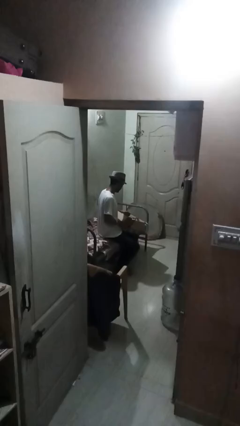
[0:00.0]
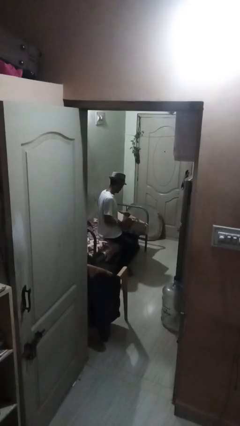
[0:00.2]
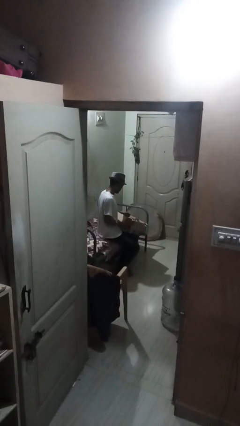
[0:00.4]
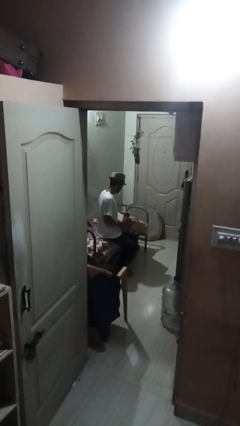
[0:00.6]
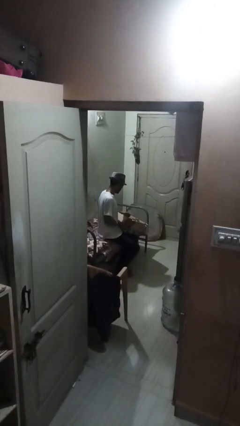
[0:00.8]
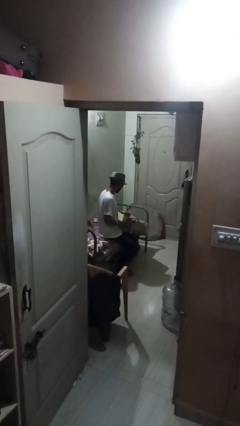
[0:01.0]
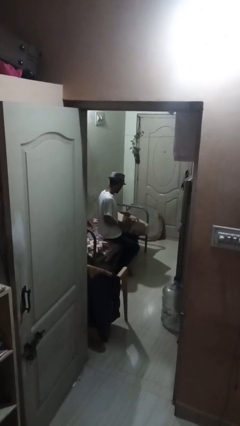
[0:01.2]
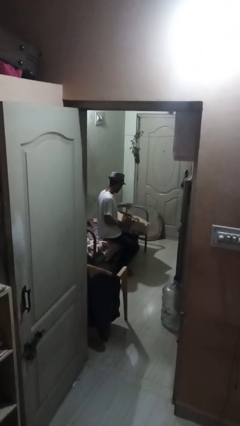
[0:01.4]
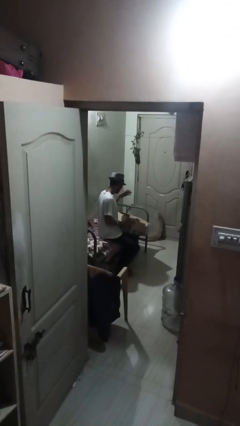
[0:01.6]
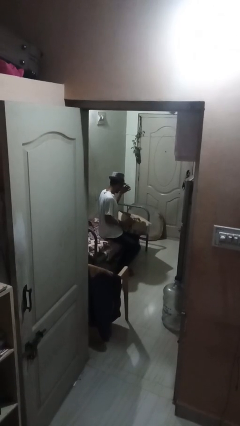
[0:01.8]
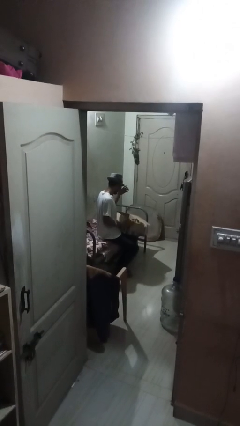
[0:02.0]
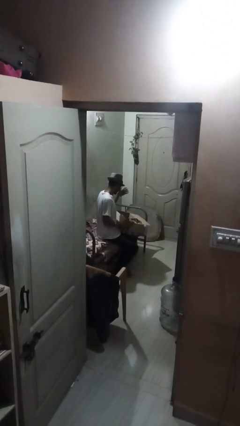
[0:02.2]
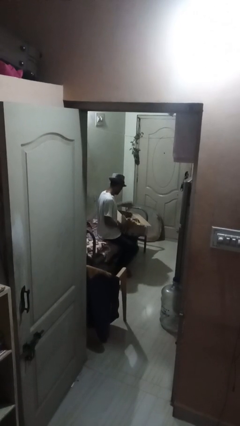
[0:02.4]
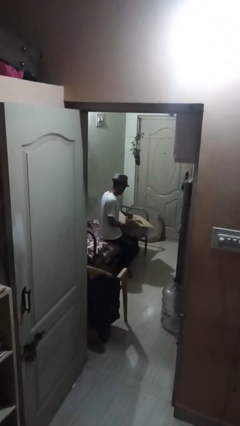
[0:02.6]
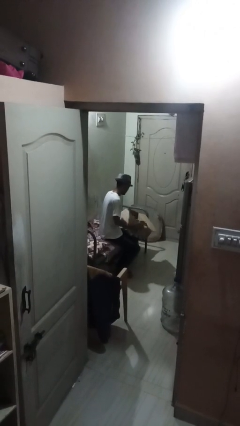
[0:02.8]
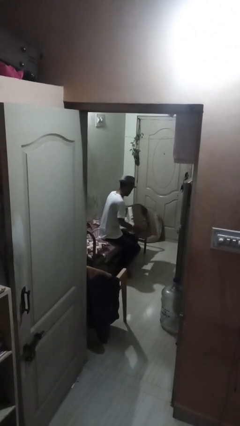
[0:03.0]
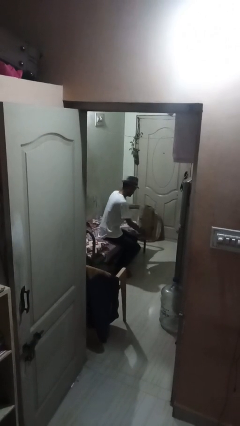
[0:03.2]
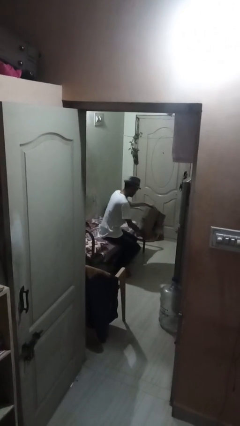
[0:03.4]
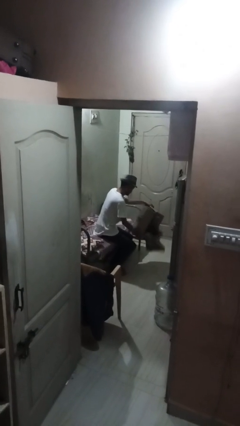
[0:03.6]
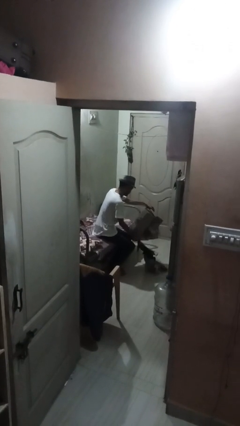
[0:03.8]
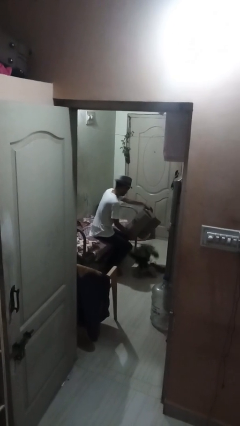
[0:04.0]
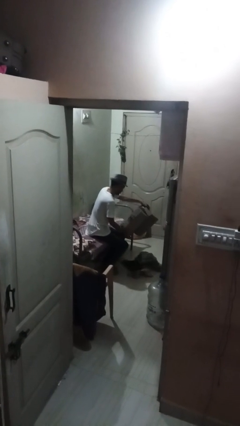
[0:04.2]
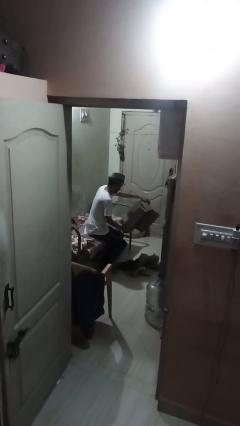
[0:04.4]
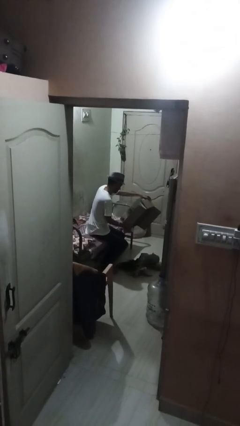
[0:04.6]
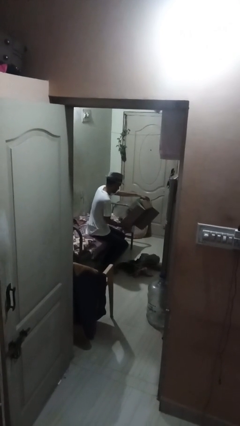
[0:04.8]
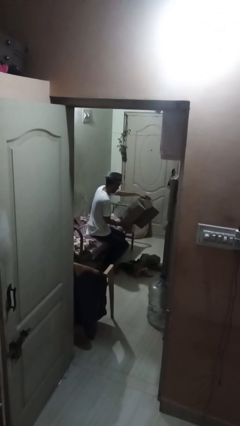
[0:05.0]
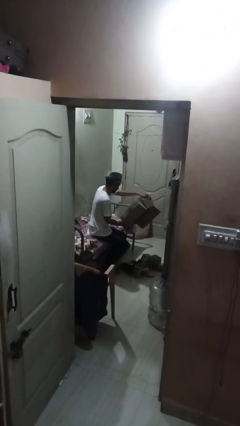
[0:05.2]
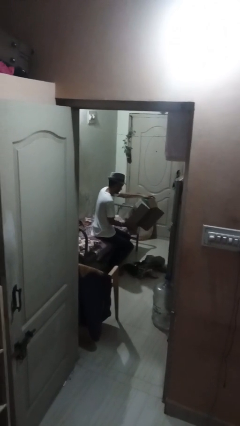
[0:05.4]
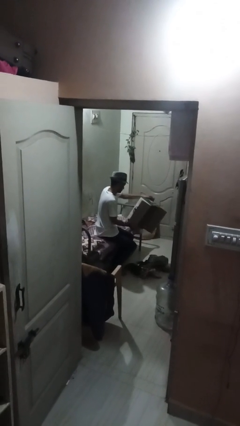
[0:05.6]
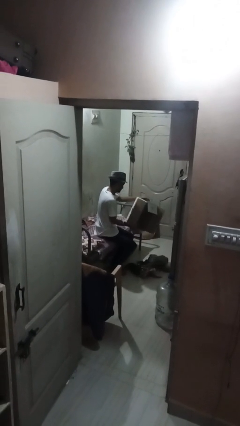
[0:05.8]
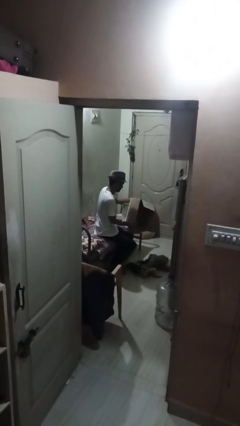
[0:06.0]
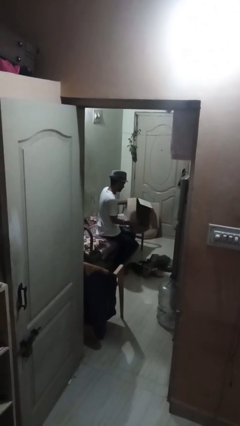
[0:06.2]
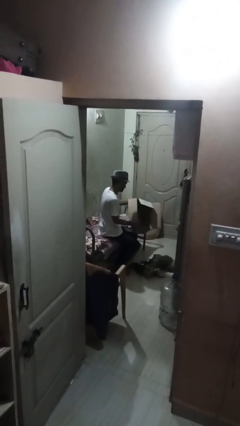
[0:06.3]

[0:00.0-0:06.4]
person unloads box onto floor

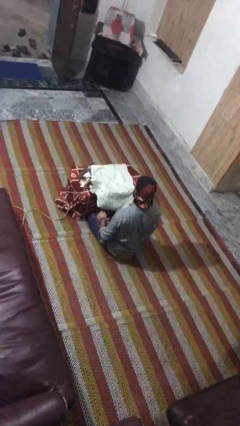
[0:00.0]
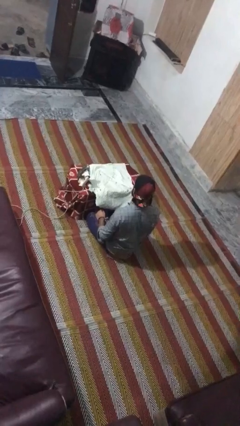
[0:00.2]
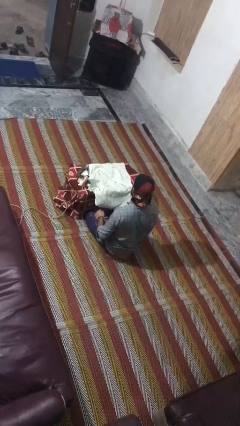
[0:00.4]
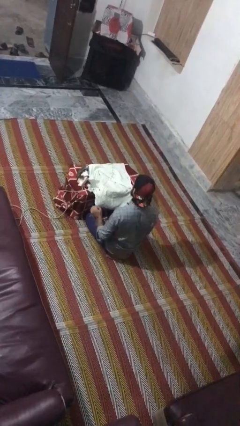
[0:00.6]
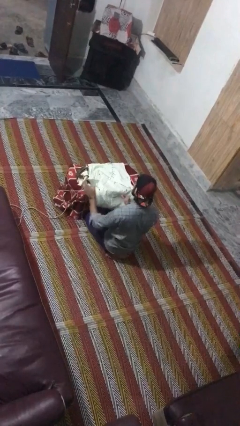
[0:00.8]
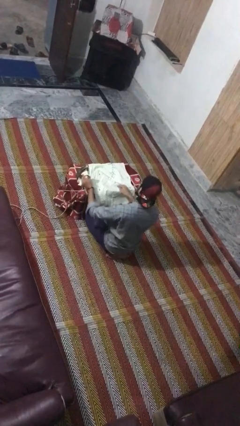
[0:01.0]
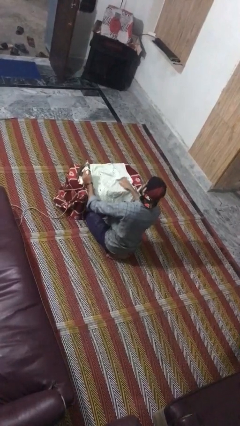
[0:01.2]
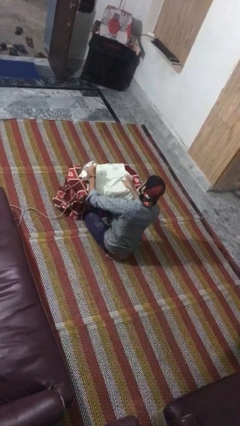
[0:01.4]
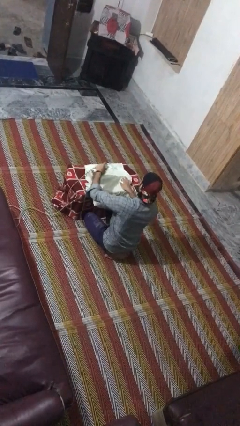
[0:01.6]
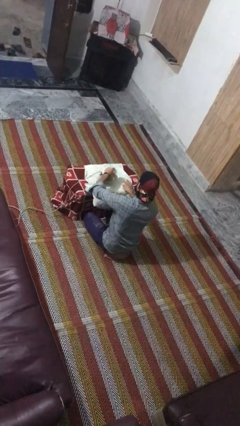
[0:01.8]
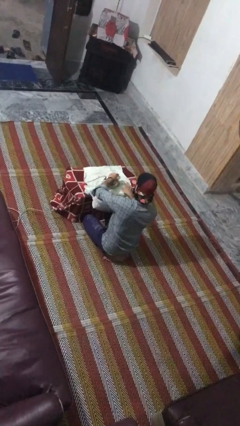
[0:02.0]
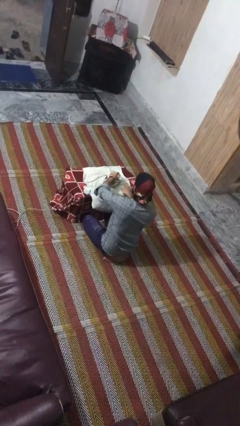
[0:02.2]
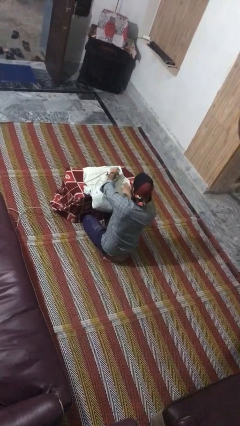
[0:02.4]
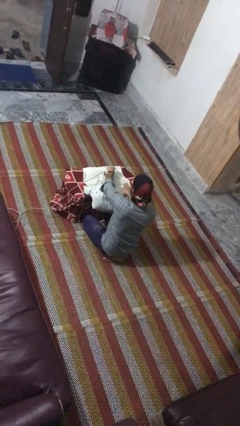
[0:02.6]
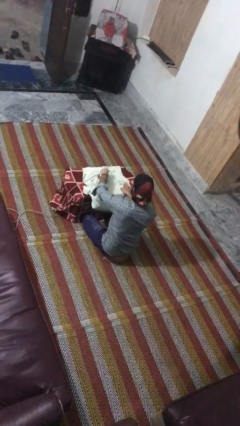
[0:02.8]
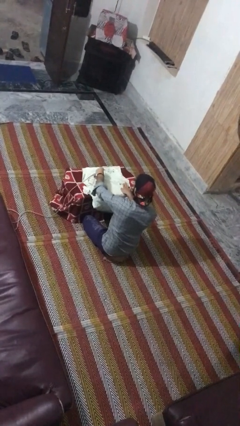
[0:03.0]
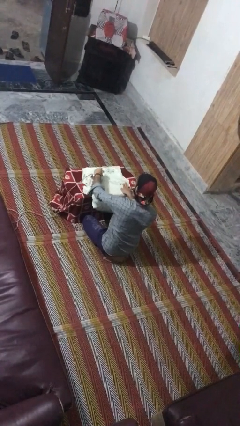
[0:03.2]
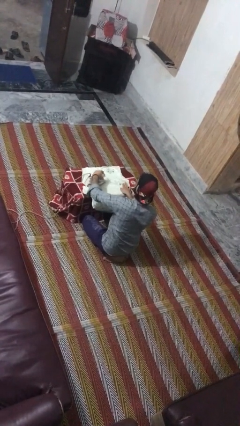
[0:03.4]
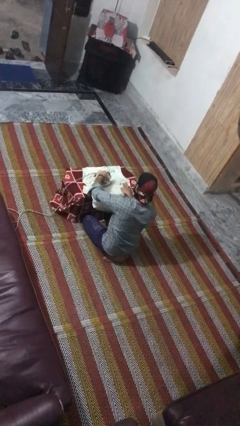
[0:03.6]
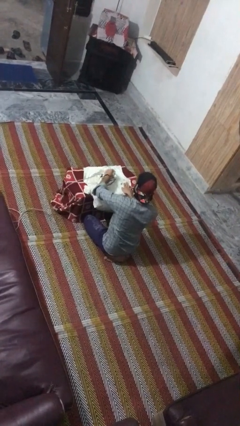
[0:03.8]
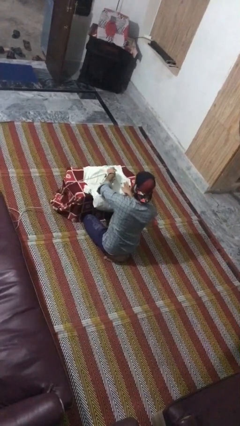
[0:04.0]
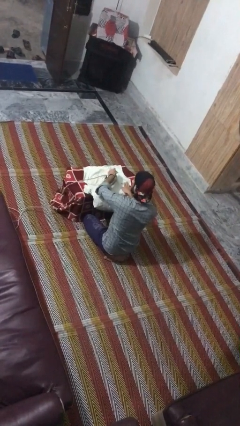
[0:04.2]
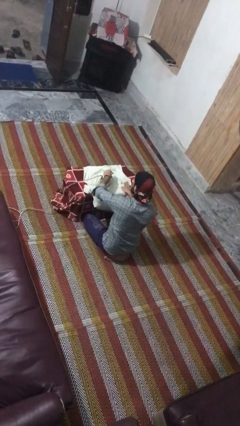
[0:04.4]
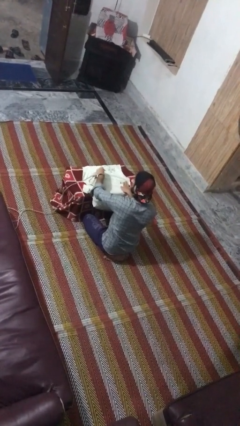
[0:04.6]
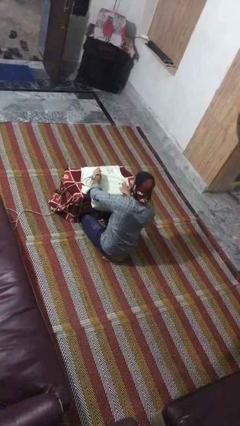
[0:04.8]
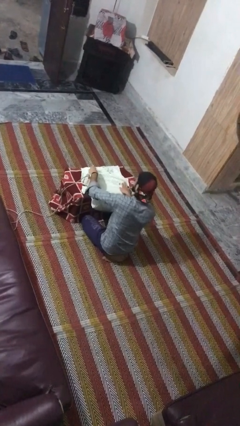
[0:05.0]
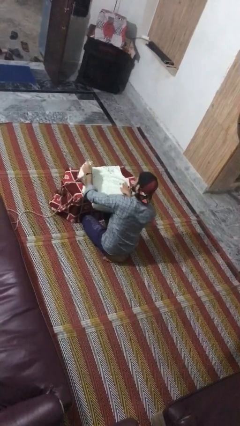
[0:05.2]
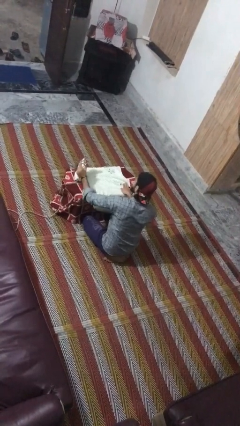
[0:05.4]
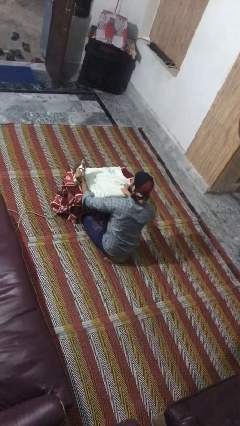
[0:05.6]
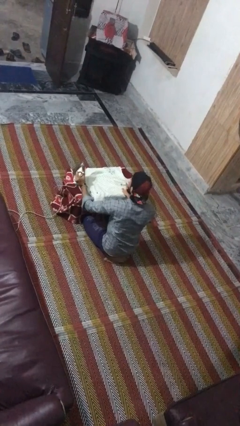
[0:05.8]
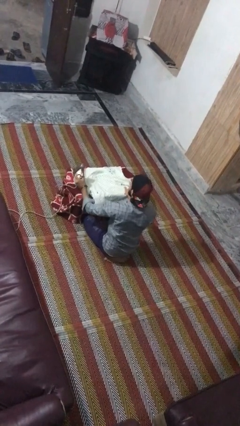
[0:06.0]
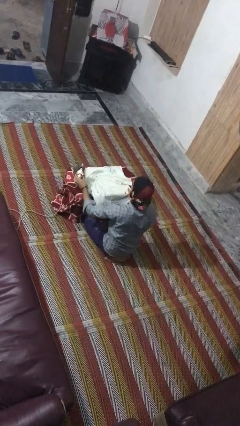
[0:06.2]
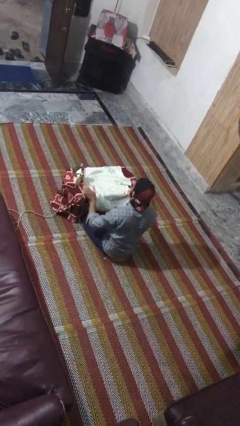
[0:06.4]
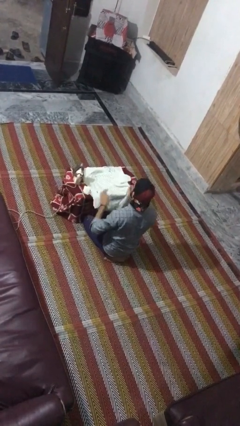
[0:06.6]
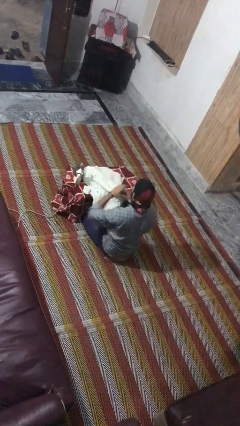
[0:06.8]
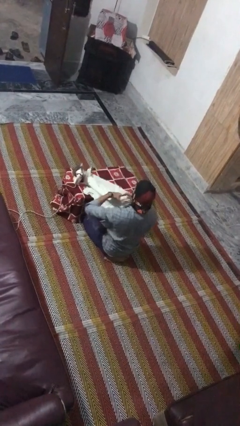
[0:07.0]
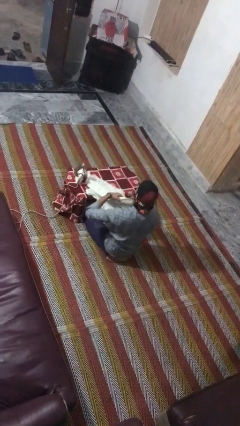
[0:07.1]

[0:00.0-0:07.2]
person irons clothes

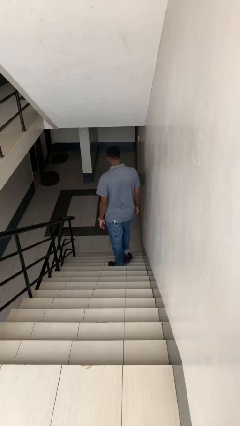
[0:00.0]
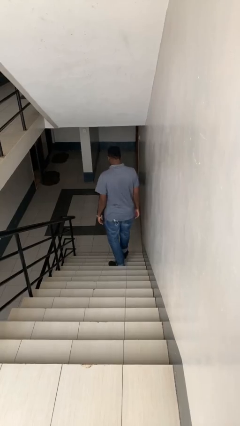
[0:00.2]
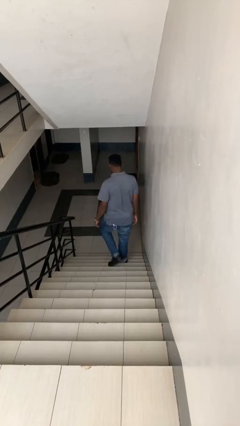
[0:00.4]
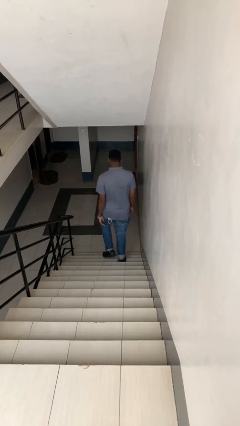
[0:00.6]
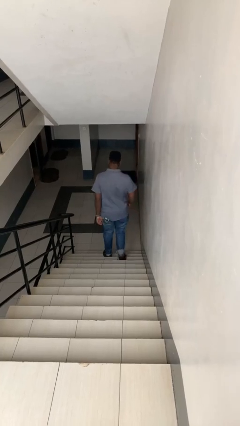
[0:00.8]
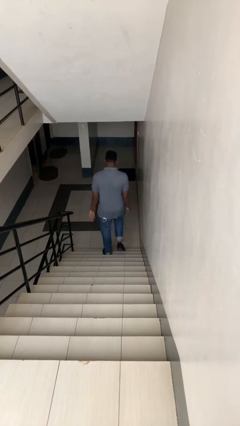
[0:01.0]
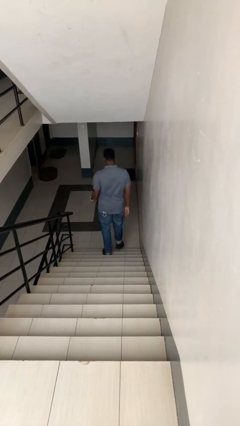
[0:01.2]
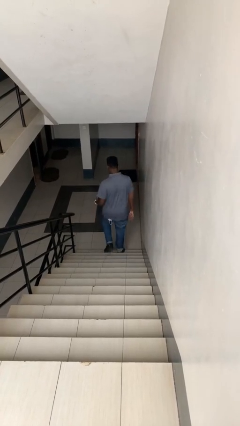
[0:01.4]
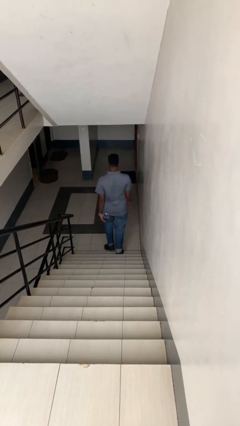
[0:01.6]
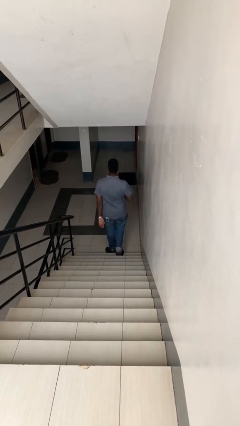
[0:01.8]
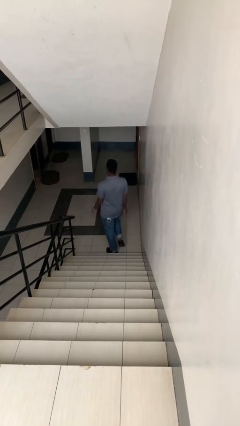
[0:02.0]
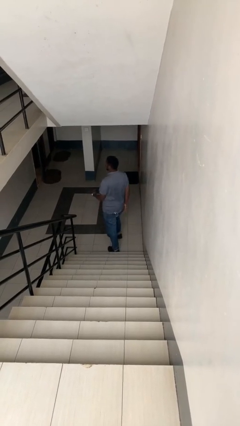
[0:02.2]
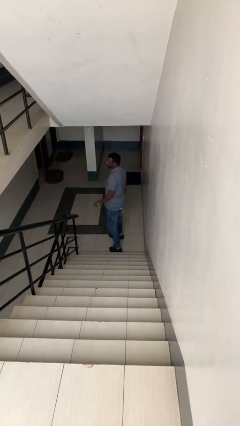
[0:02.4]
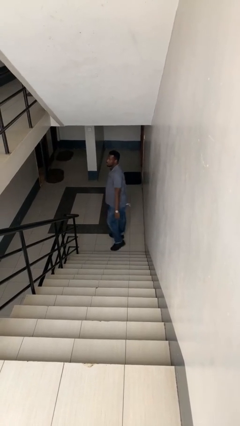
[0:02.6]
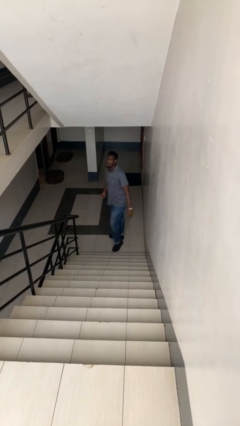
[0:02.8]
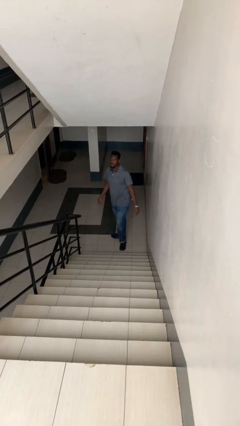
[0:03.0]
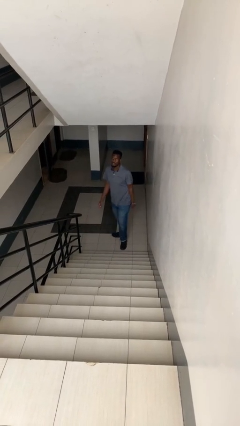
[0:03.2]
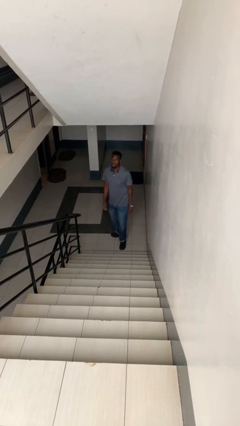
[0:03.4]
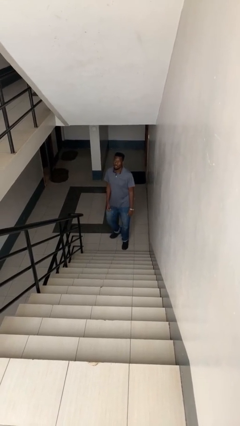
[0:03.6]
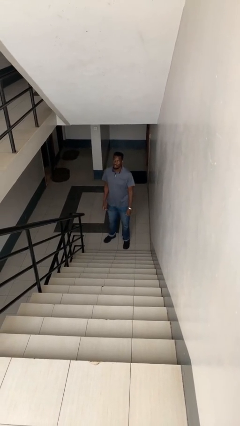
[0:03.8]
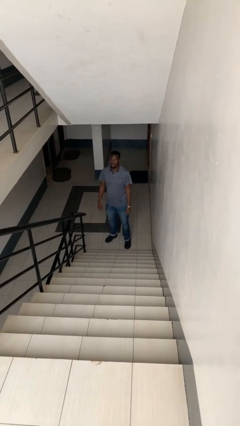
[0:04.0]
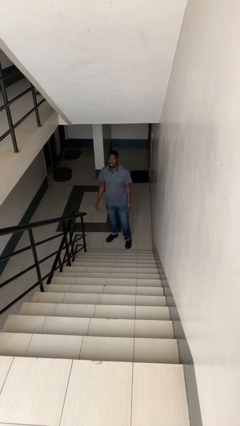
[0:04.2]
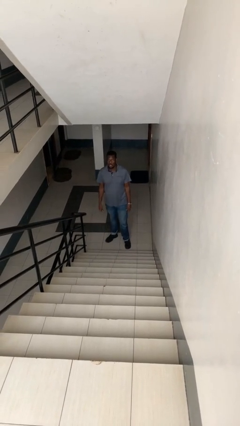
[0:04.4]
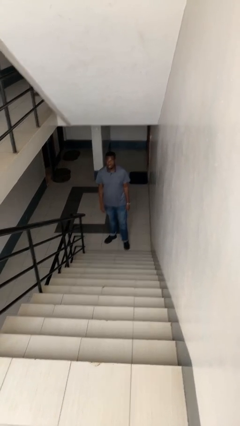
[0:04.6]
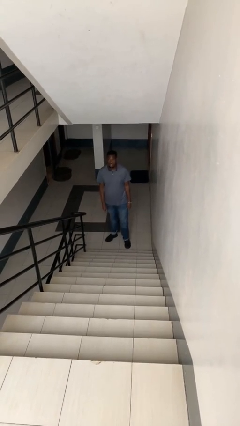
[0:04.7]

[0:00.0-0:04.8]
person climbs down stairs

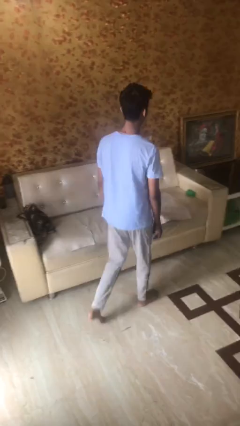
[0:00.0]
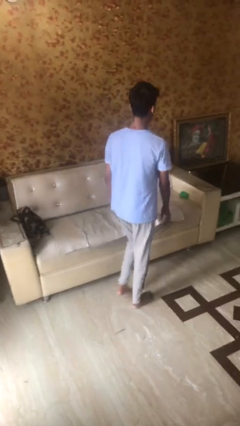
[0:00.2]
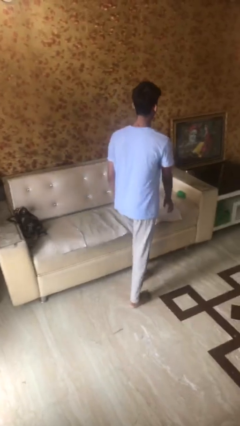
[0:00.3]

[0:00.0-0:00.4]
person picks up object from bed
